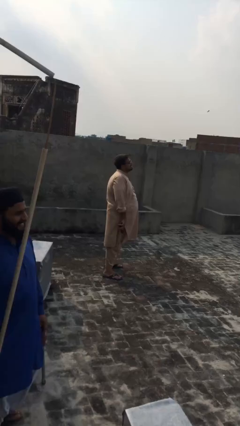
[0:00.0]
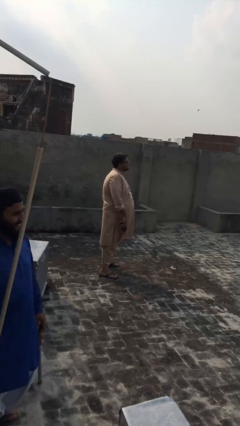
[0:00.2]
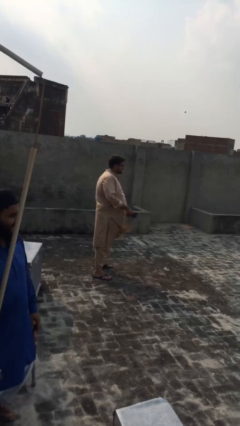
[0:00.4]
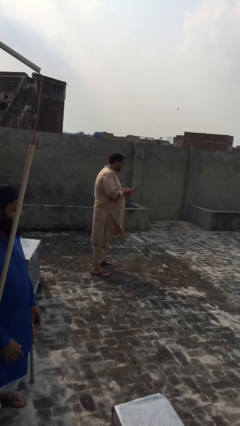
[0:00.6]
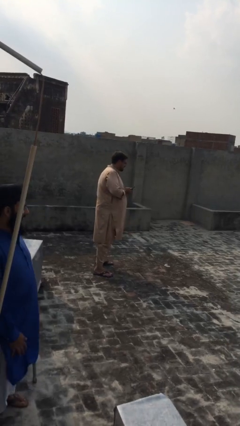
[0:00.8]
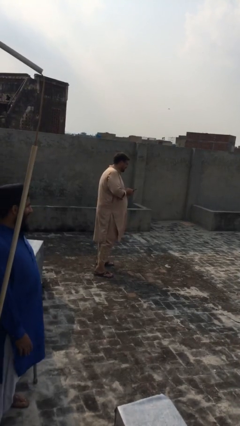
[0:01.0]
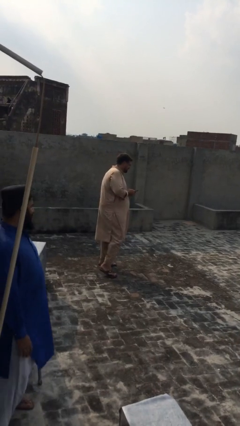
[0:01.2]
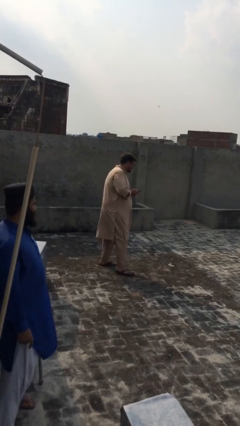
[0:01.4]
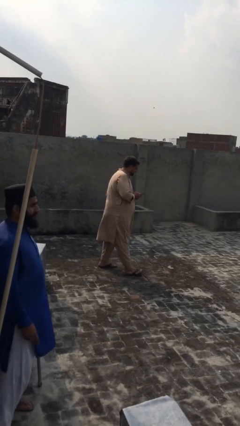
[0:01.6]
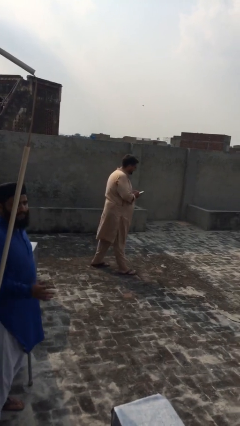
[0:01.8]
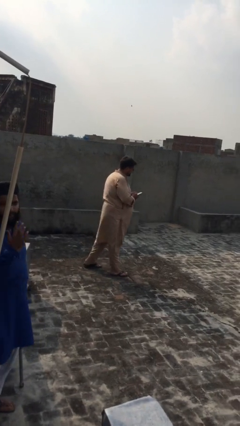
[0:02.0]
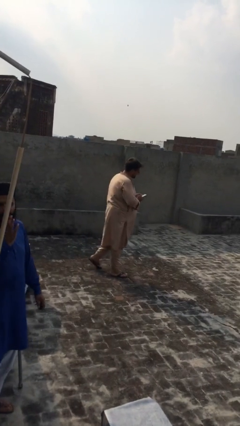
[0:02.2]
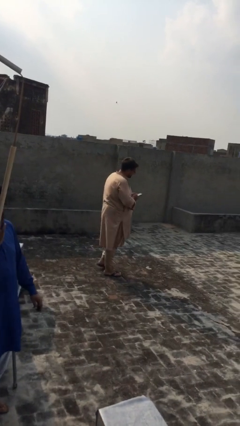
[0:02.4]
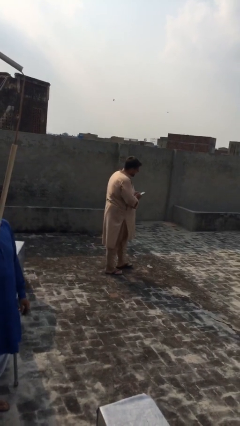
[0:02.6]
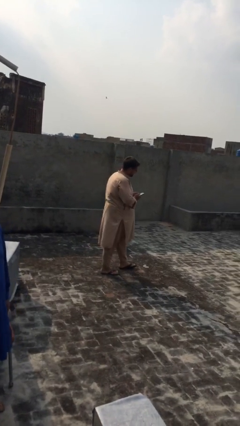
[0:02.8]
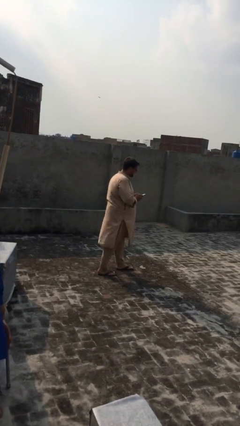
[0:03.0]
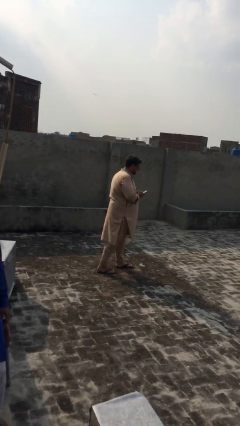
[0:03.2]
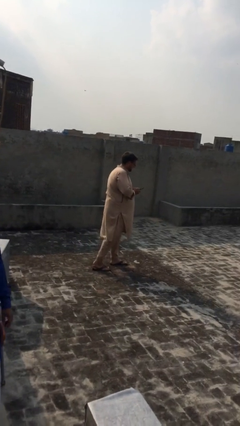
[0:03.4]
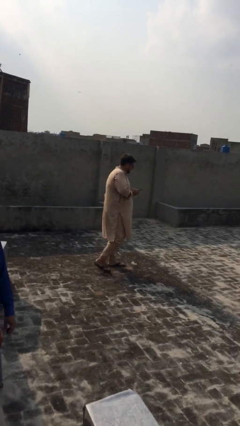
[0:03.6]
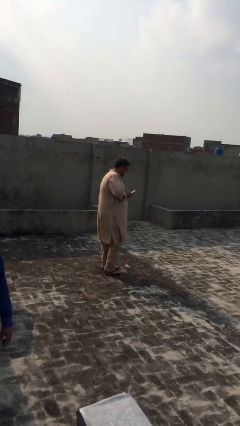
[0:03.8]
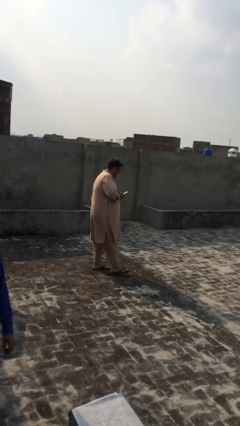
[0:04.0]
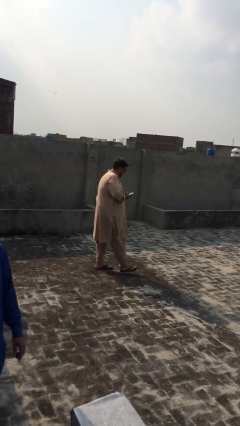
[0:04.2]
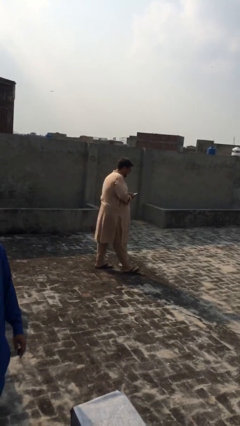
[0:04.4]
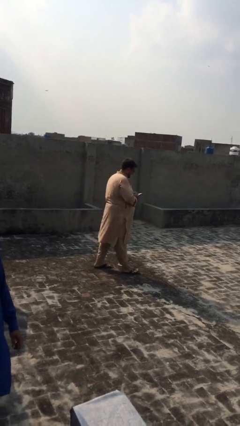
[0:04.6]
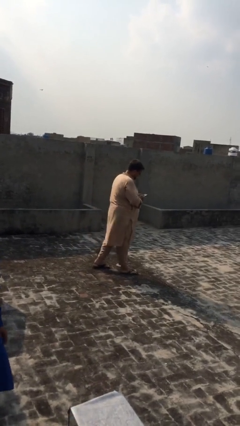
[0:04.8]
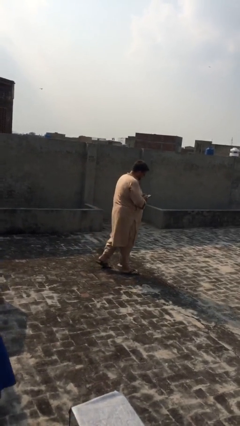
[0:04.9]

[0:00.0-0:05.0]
person texts on phone

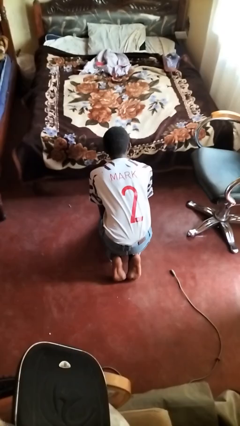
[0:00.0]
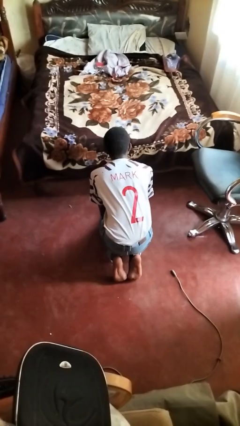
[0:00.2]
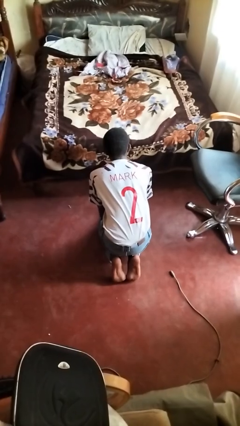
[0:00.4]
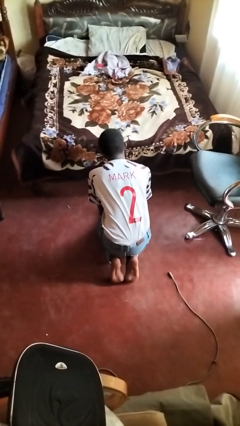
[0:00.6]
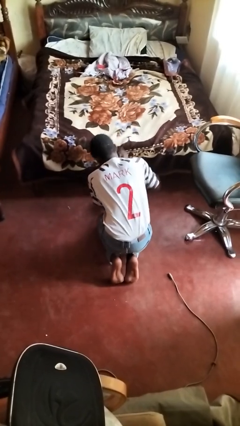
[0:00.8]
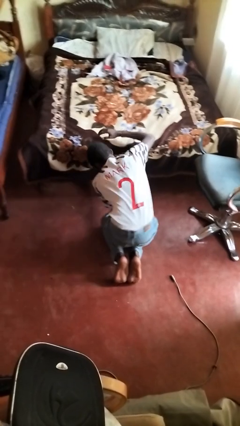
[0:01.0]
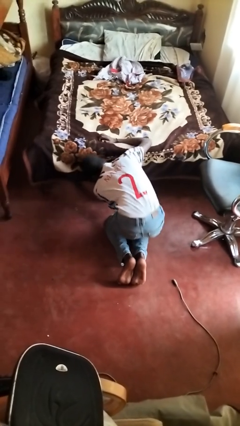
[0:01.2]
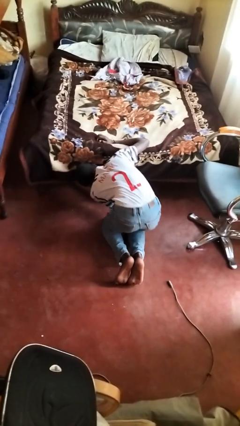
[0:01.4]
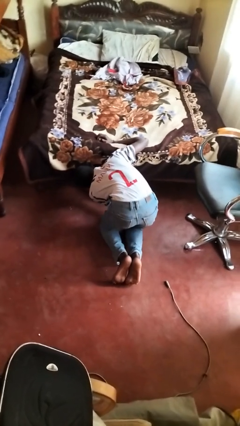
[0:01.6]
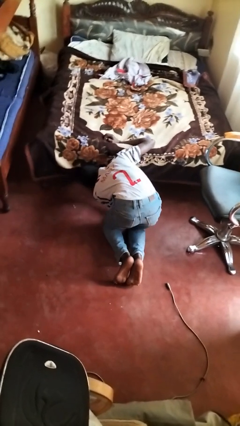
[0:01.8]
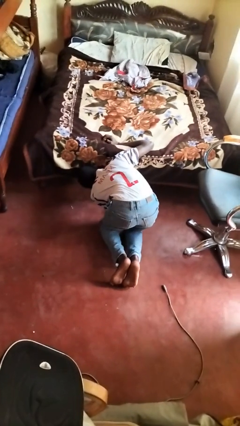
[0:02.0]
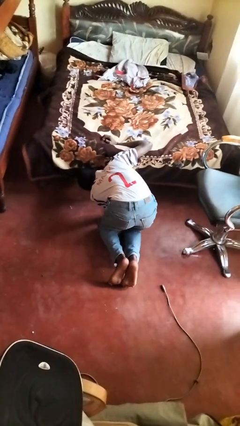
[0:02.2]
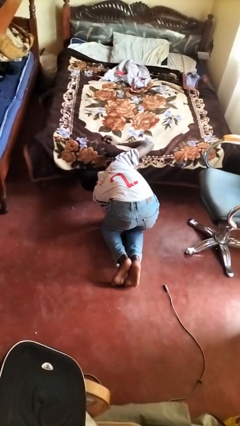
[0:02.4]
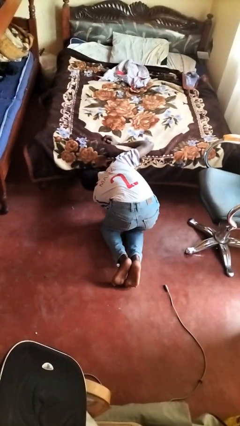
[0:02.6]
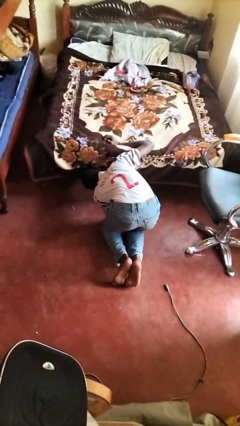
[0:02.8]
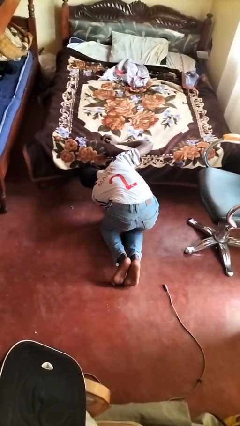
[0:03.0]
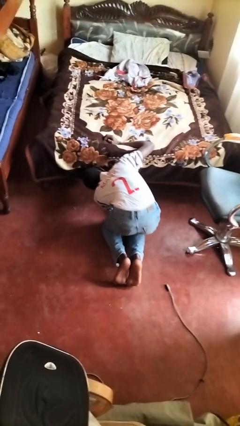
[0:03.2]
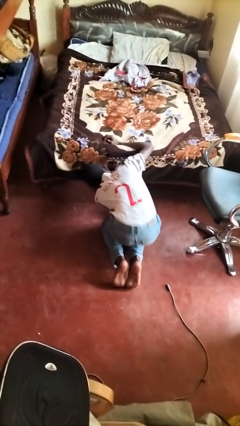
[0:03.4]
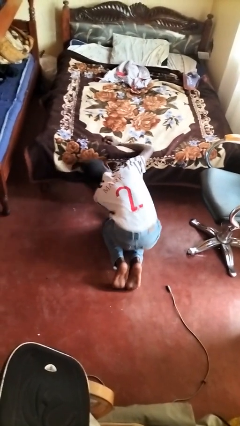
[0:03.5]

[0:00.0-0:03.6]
person searches under bed

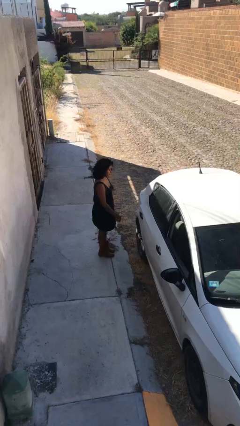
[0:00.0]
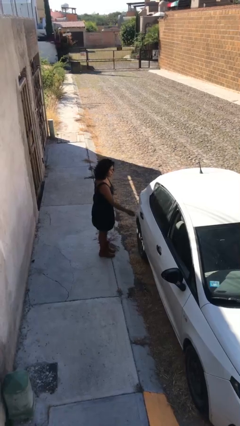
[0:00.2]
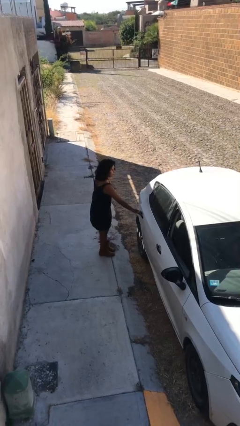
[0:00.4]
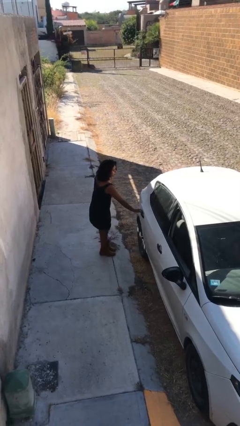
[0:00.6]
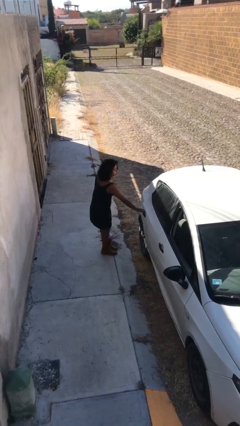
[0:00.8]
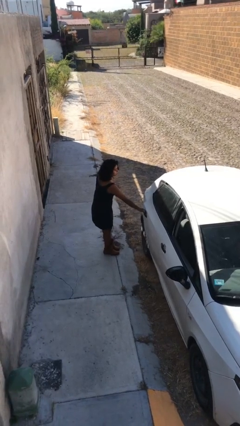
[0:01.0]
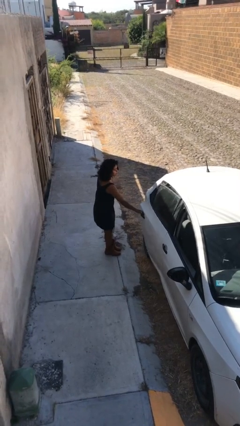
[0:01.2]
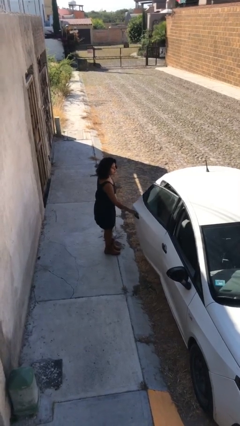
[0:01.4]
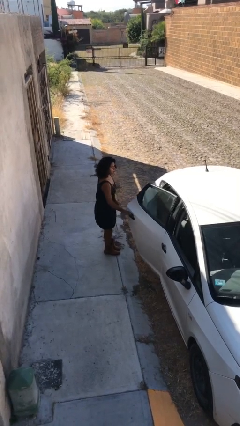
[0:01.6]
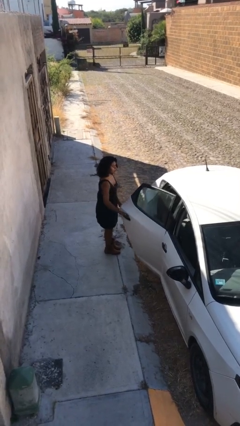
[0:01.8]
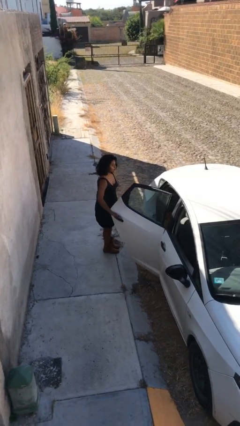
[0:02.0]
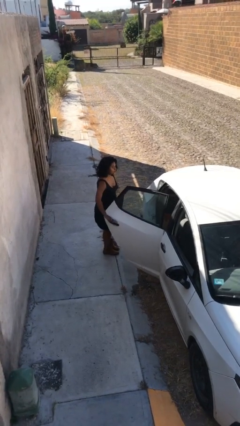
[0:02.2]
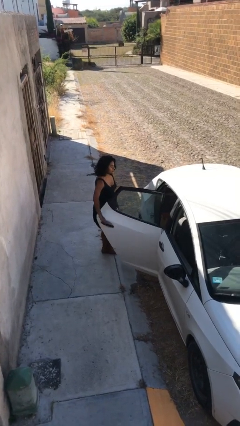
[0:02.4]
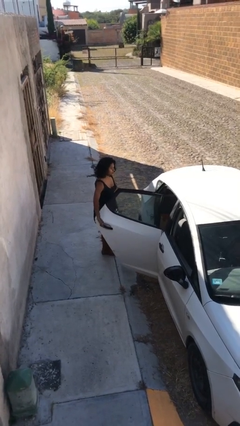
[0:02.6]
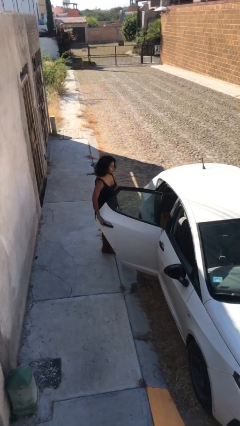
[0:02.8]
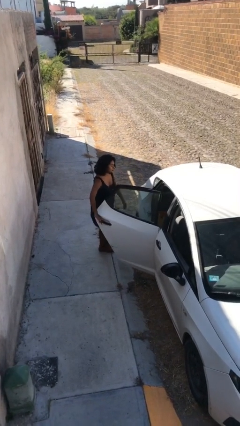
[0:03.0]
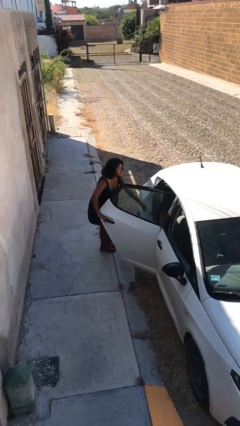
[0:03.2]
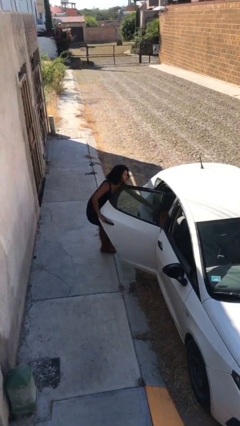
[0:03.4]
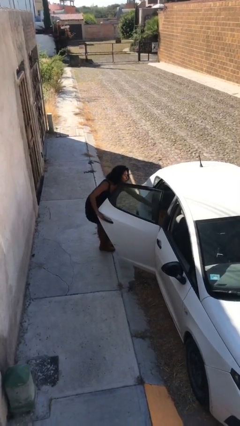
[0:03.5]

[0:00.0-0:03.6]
person opens car door

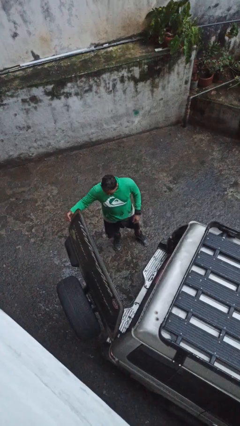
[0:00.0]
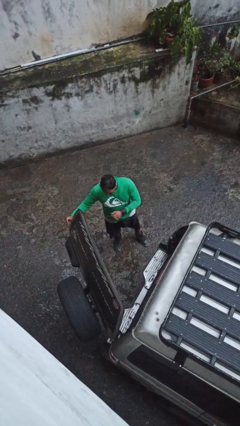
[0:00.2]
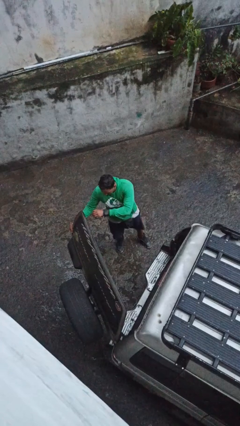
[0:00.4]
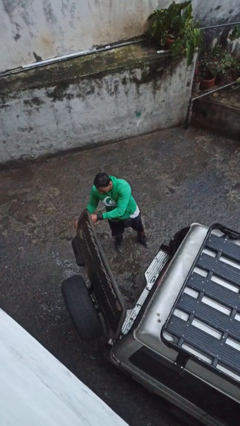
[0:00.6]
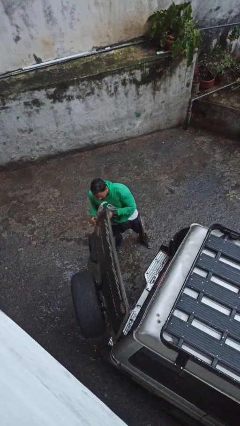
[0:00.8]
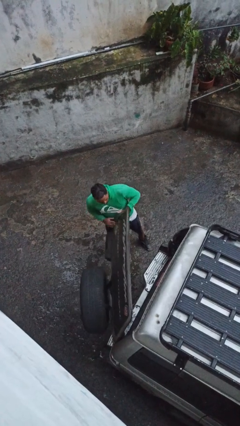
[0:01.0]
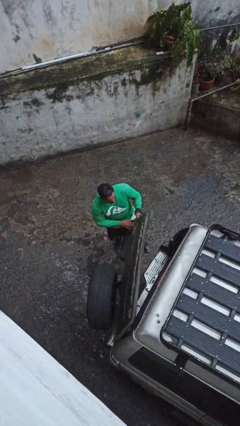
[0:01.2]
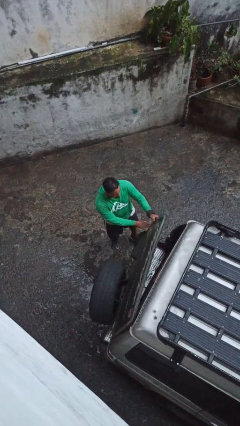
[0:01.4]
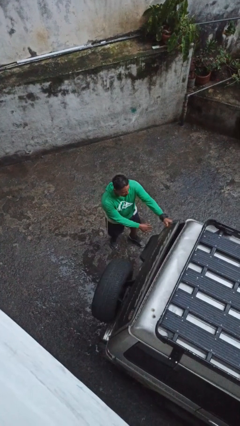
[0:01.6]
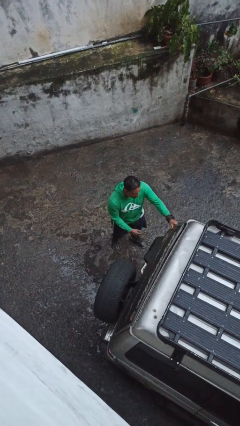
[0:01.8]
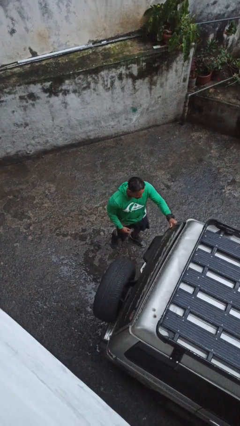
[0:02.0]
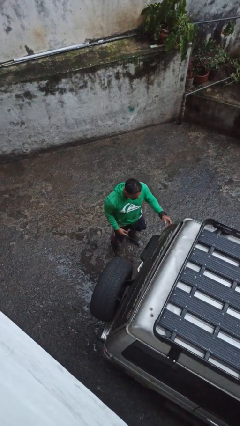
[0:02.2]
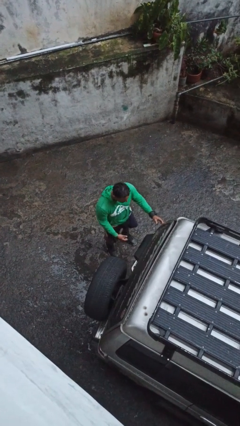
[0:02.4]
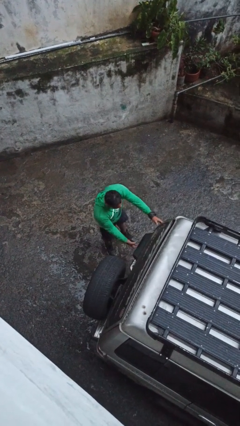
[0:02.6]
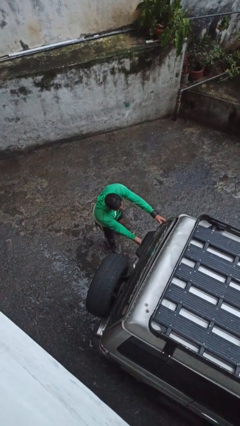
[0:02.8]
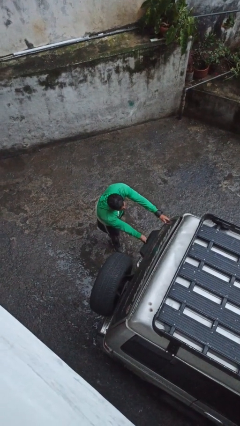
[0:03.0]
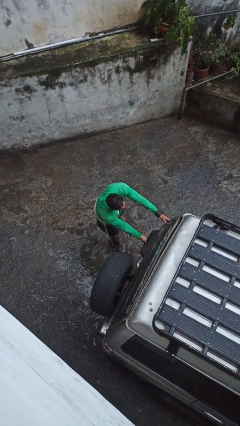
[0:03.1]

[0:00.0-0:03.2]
person closes car trunk

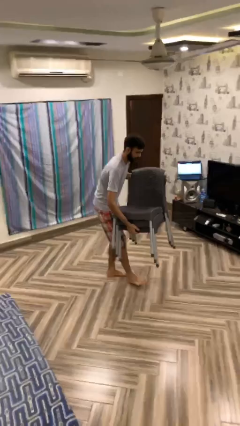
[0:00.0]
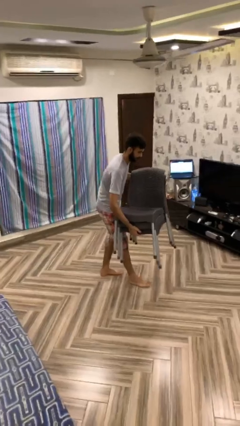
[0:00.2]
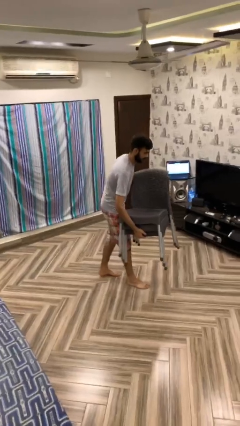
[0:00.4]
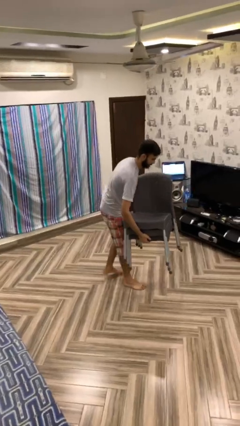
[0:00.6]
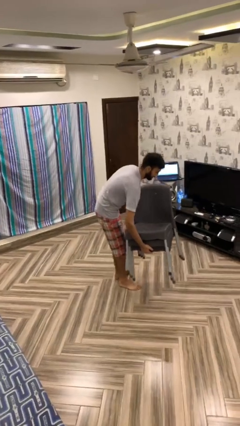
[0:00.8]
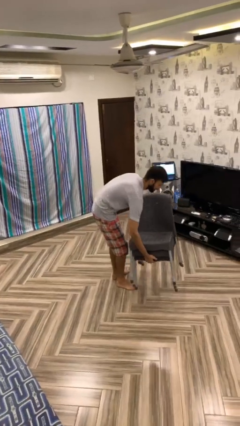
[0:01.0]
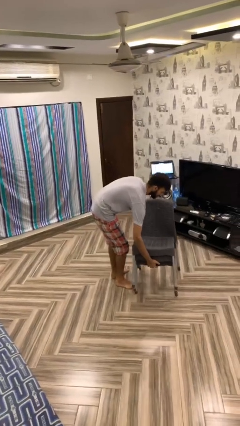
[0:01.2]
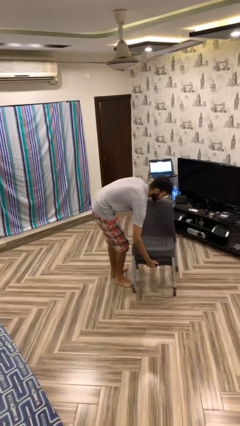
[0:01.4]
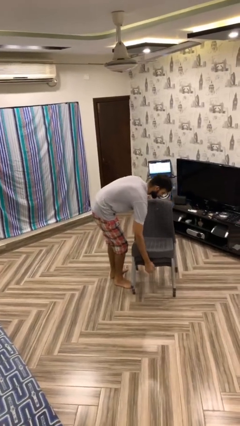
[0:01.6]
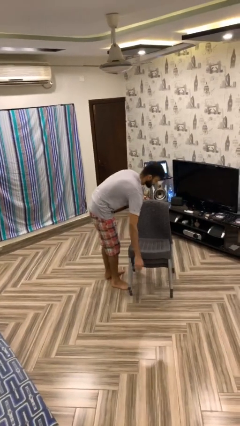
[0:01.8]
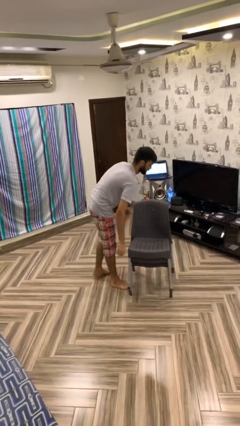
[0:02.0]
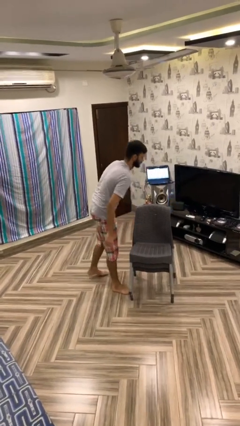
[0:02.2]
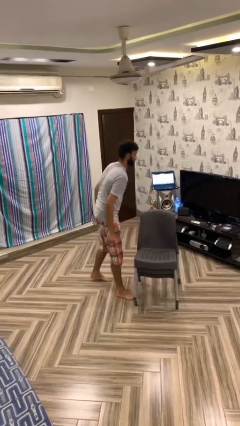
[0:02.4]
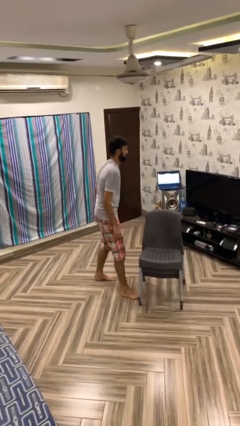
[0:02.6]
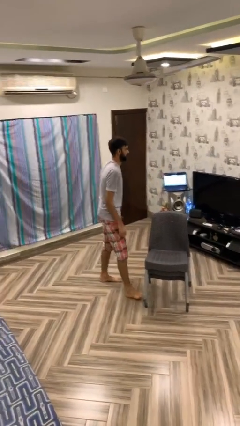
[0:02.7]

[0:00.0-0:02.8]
person puts down object on floor
